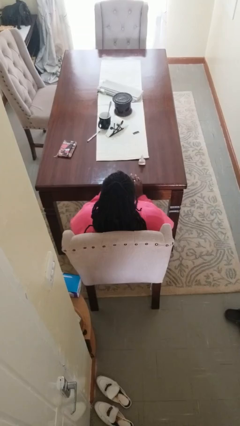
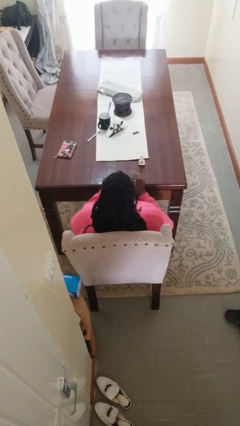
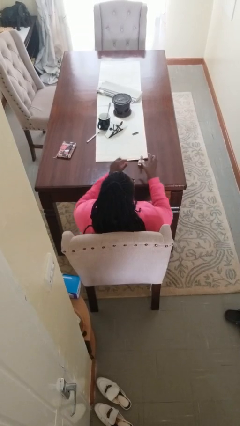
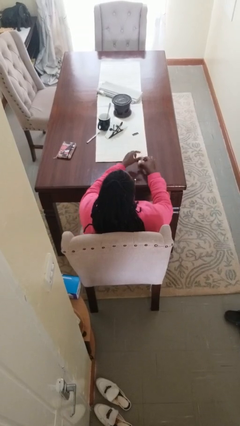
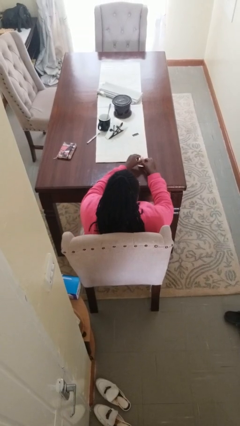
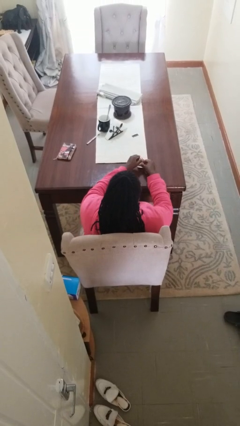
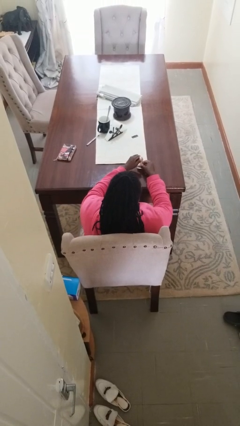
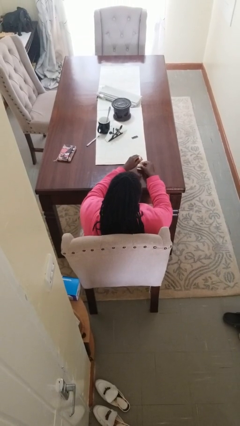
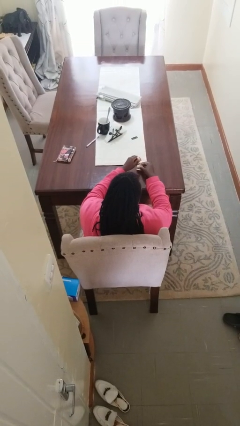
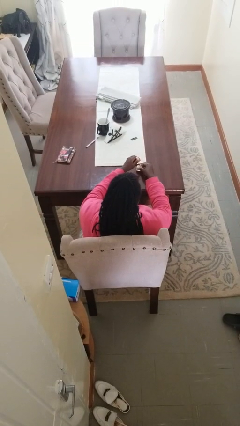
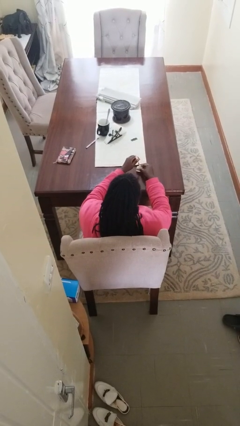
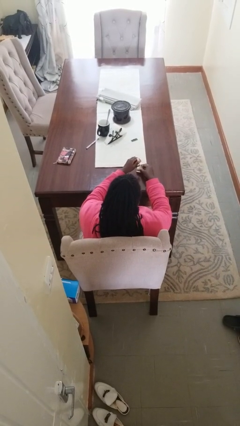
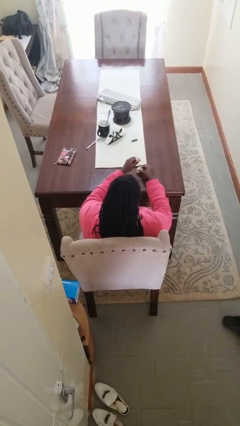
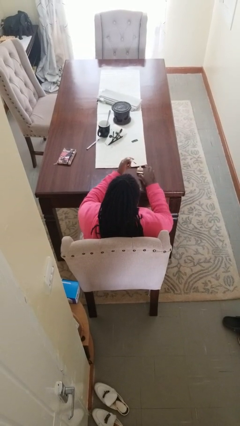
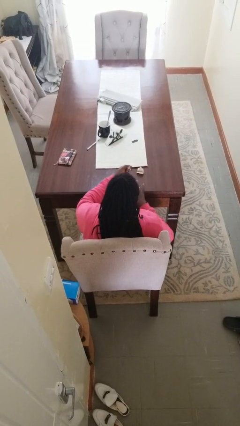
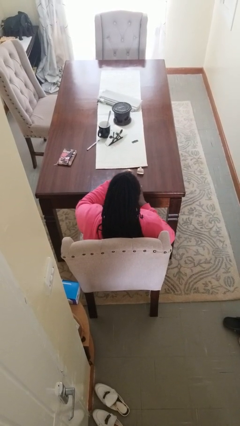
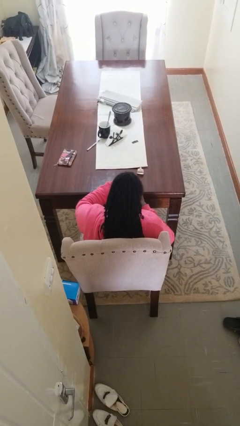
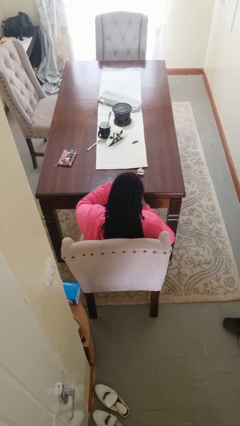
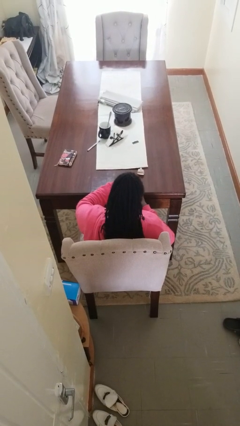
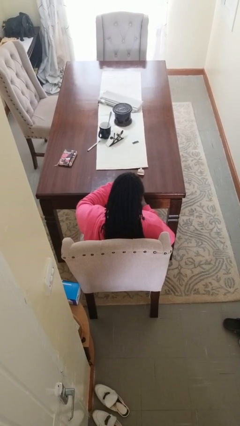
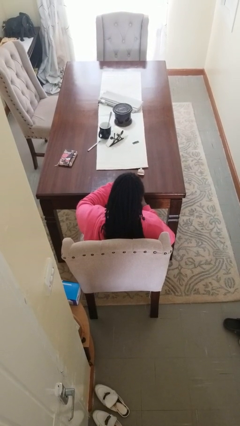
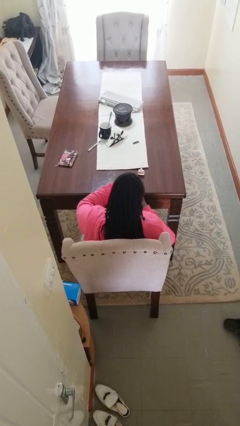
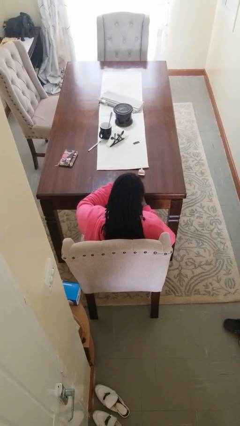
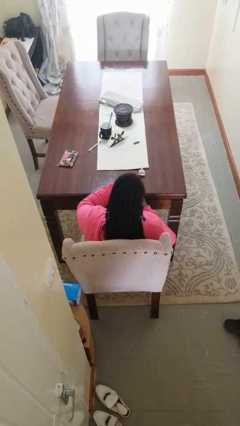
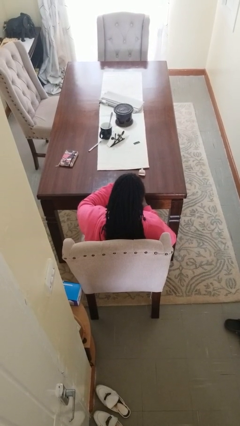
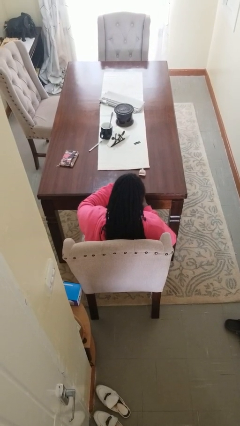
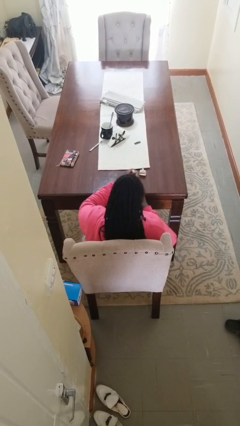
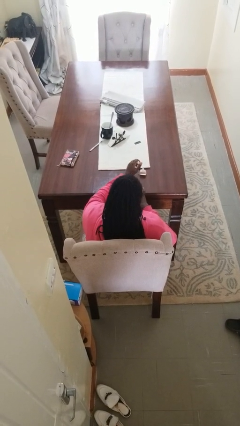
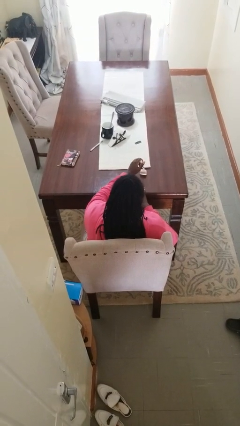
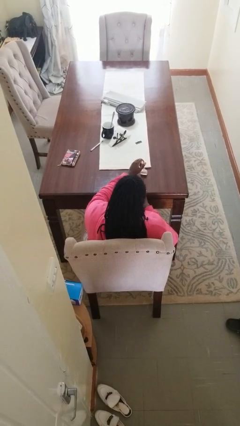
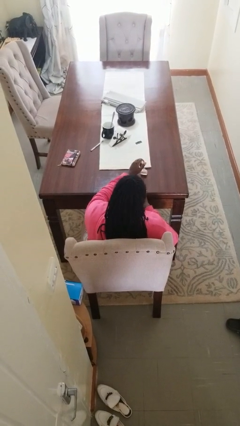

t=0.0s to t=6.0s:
person paints fingernails

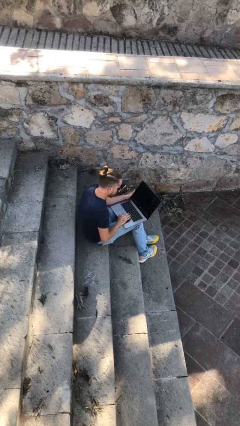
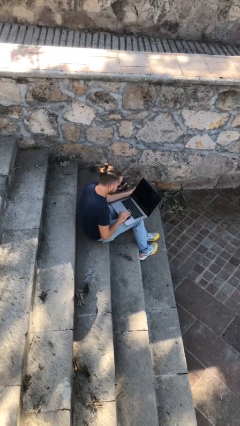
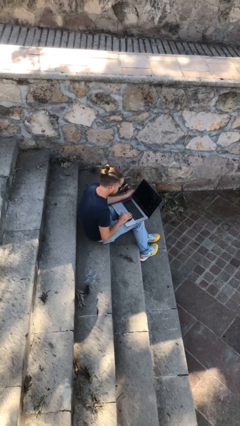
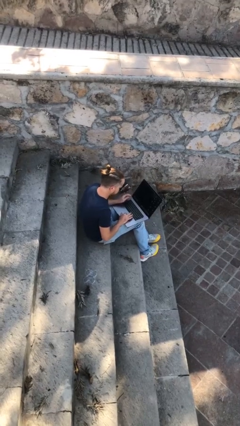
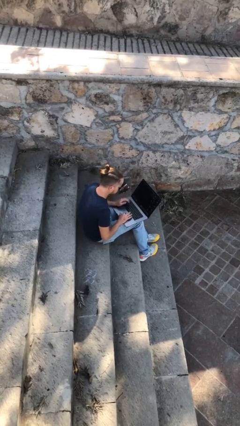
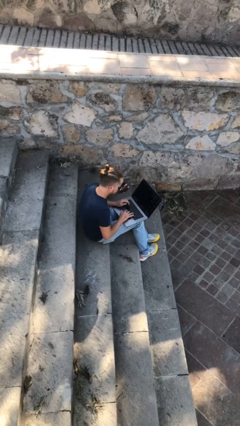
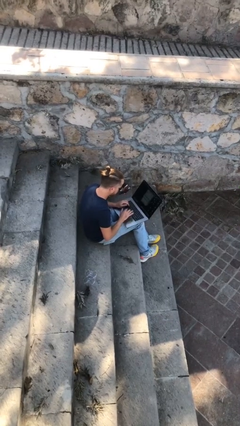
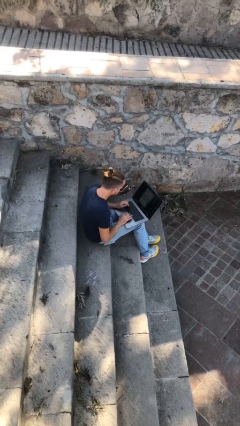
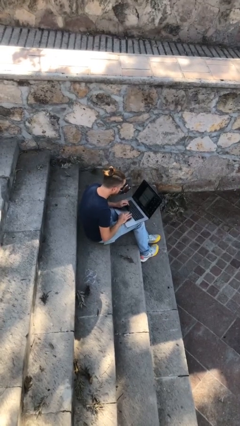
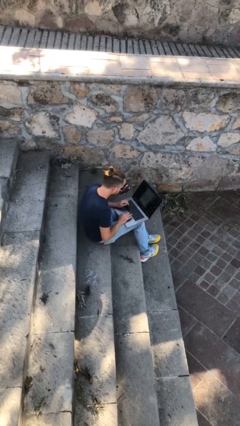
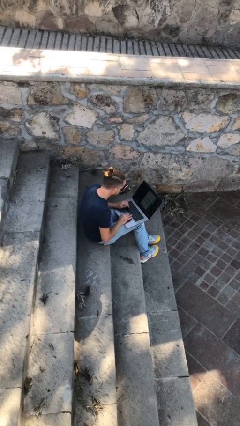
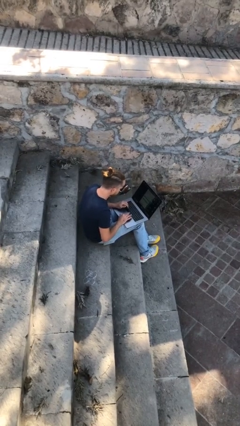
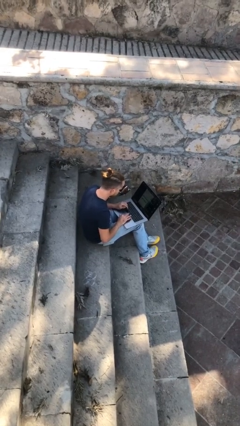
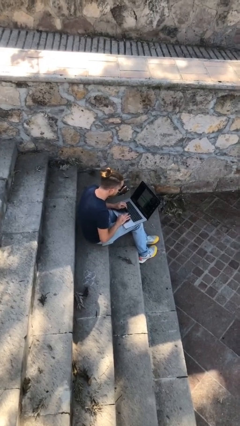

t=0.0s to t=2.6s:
person interacts with laptop

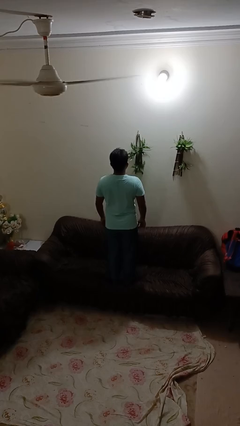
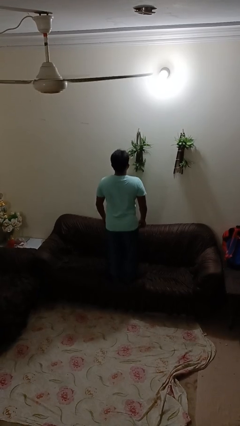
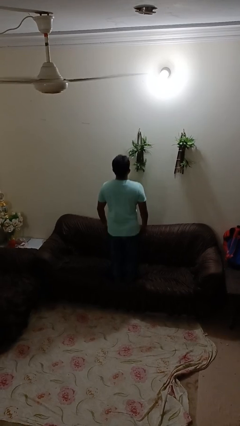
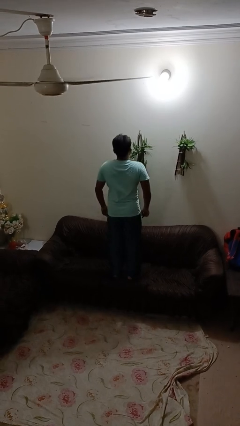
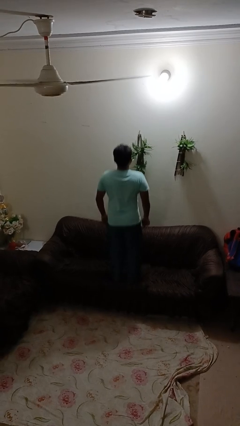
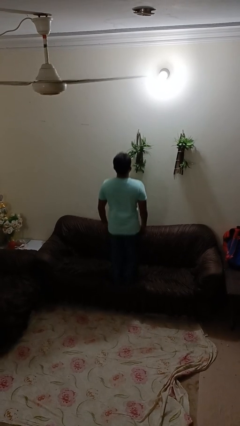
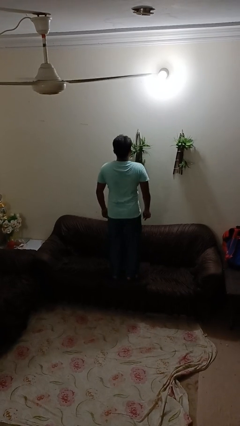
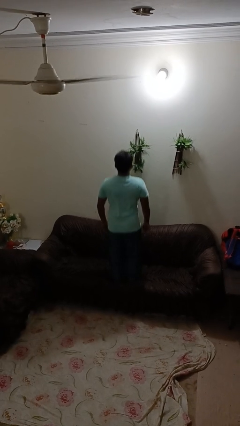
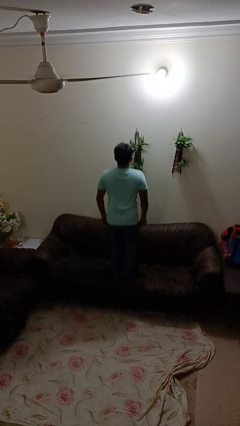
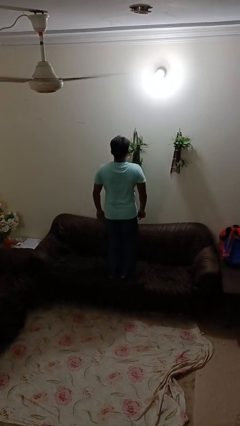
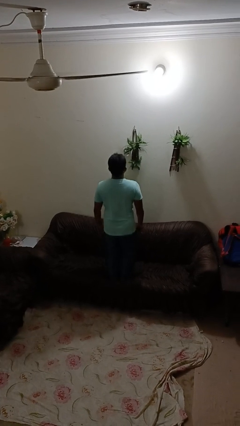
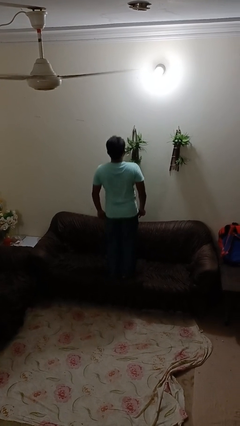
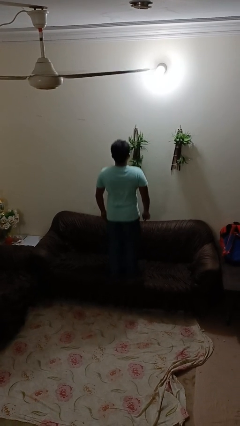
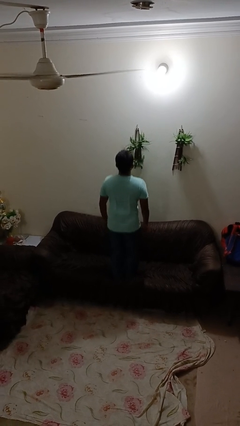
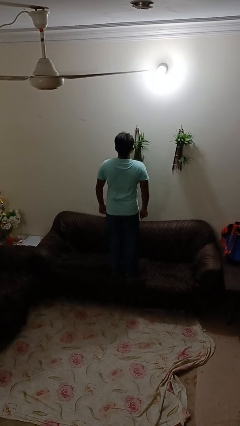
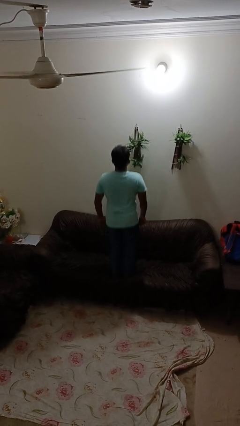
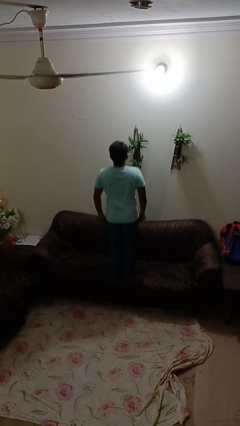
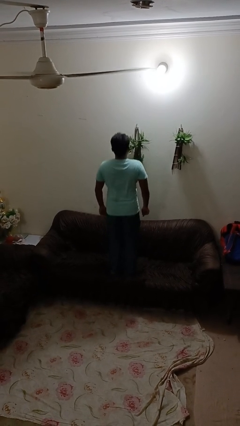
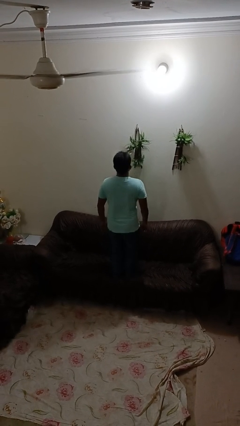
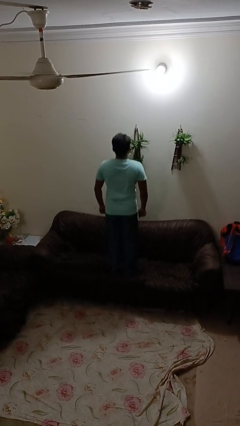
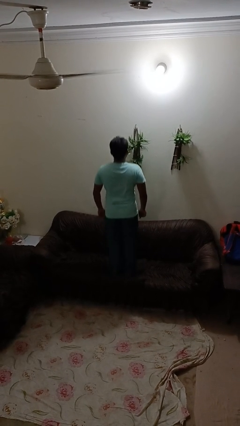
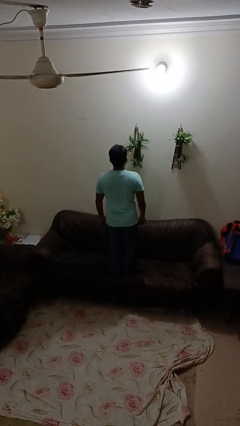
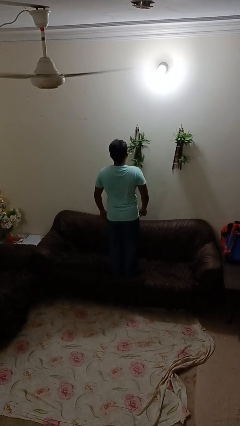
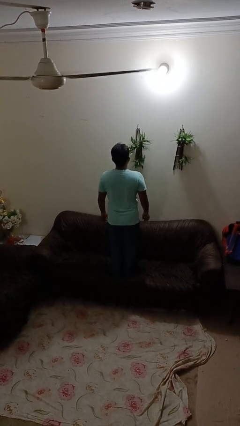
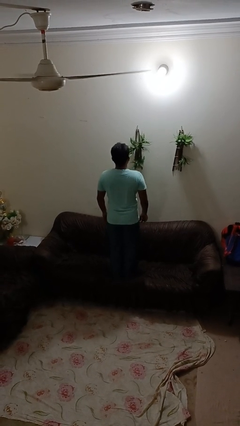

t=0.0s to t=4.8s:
person jumps on couch

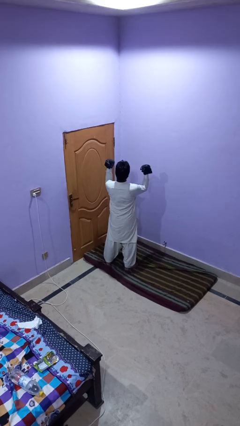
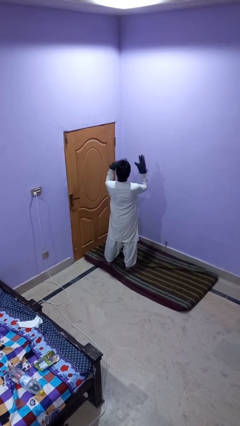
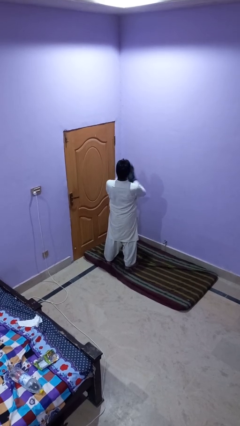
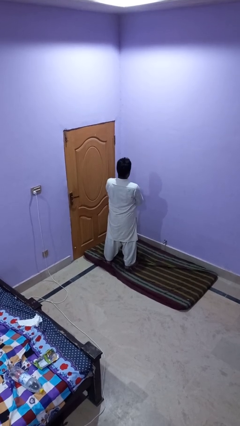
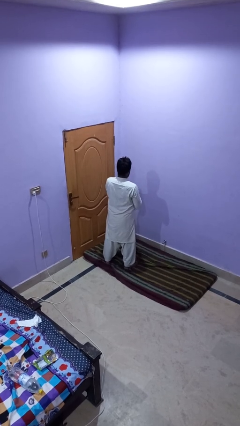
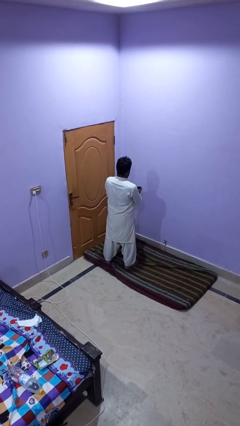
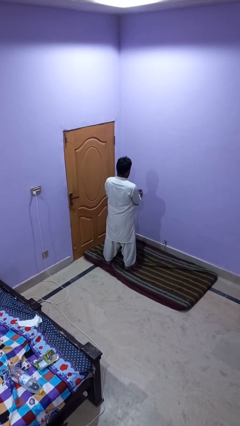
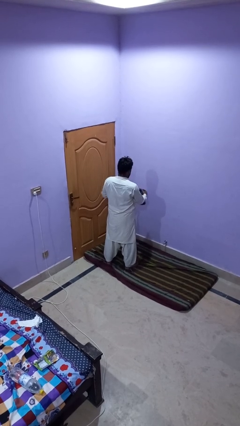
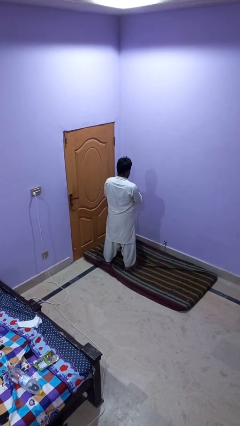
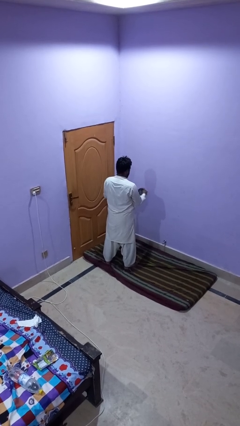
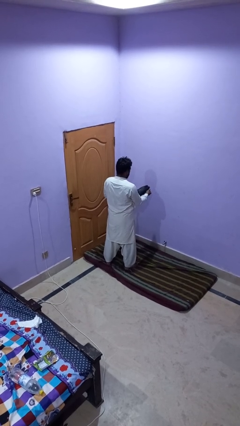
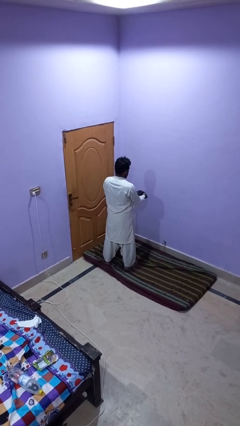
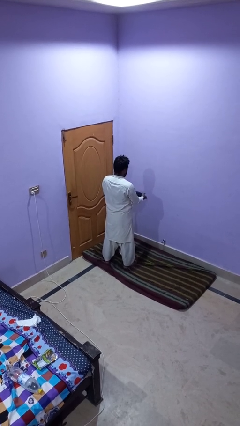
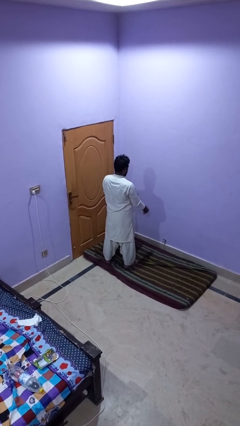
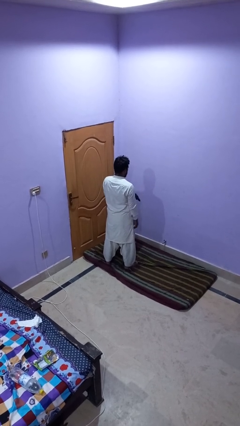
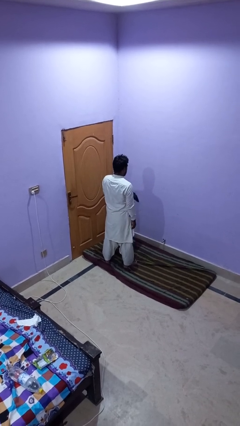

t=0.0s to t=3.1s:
person takes off gloves

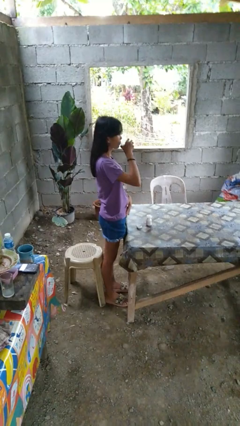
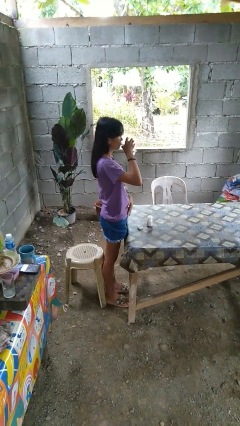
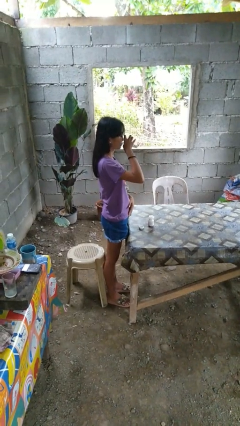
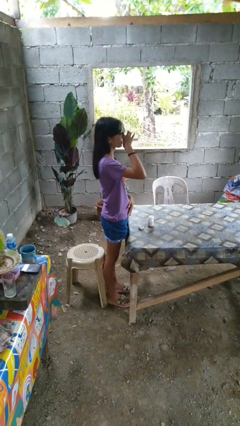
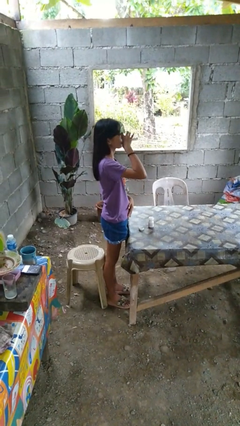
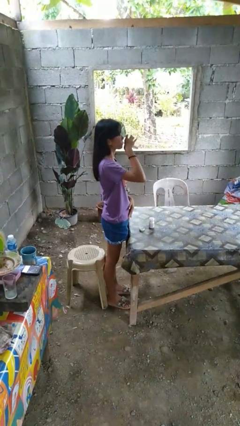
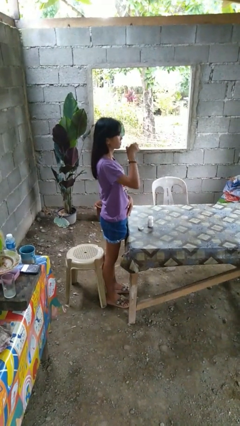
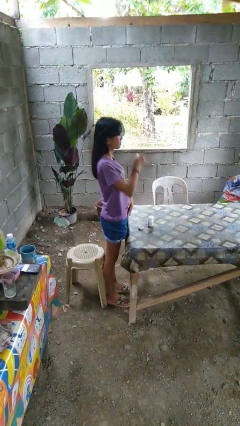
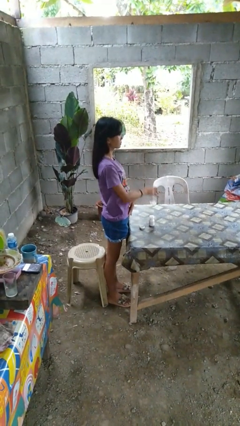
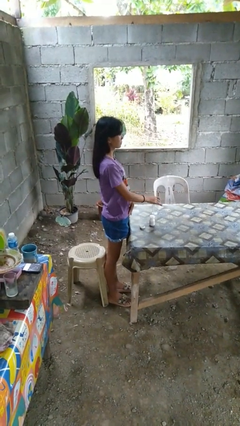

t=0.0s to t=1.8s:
person drinks from cup
